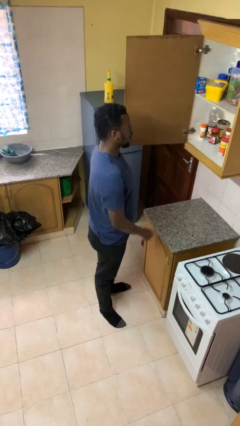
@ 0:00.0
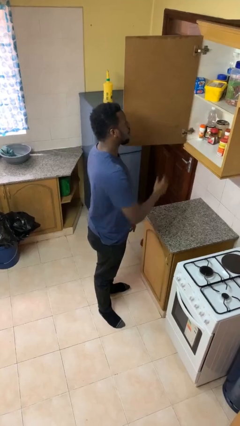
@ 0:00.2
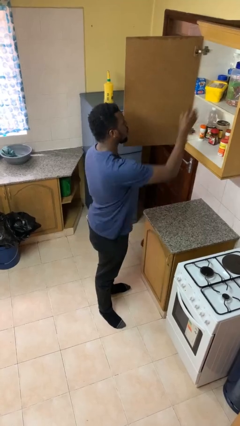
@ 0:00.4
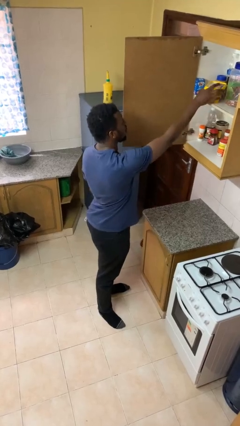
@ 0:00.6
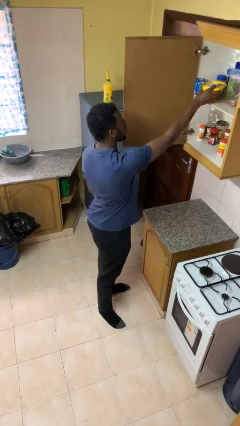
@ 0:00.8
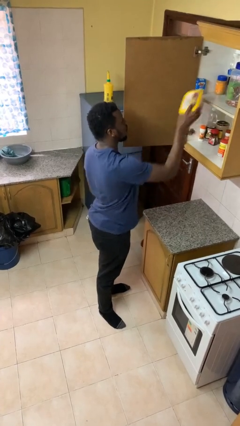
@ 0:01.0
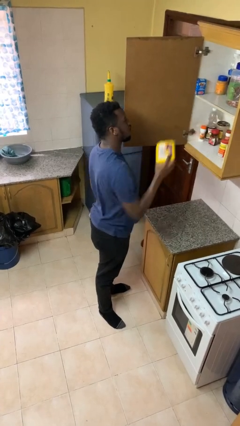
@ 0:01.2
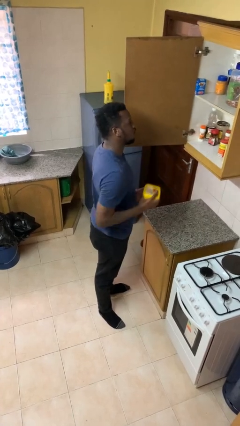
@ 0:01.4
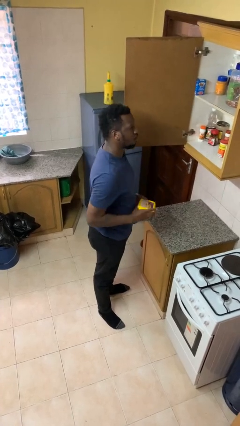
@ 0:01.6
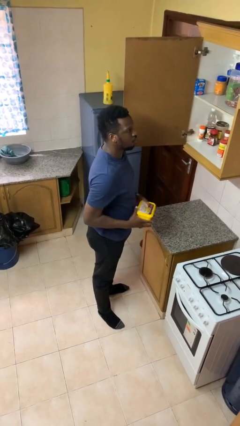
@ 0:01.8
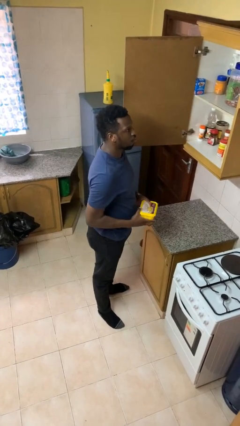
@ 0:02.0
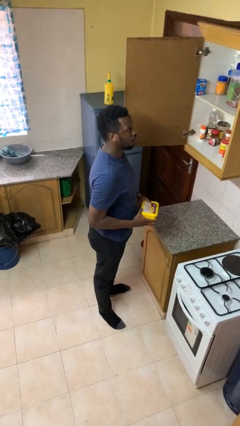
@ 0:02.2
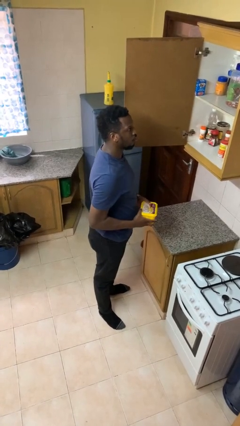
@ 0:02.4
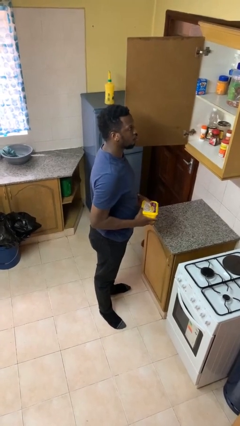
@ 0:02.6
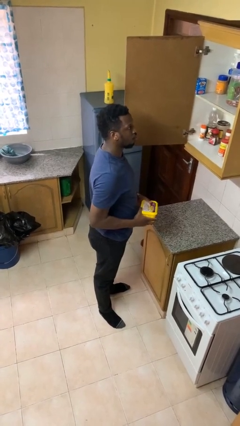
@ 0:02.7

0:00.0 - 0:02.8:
person picks up object from shelf

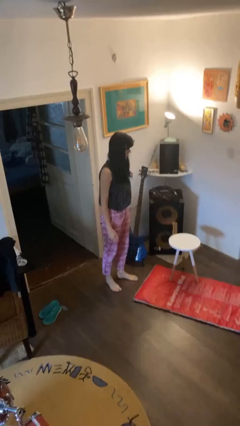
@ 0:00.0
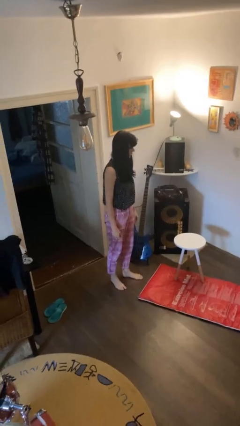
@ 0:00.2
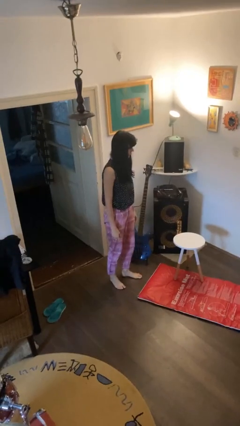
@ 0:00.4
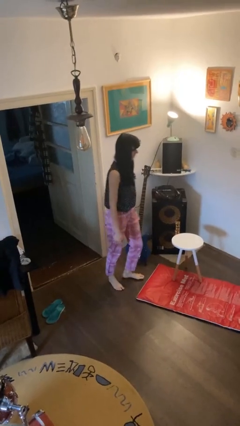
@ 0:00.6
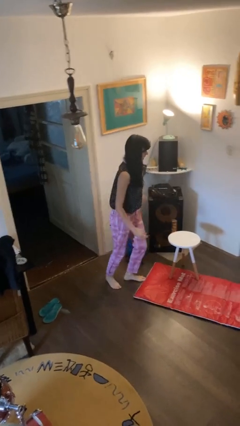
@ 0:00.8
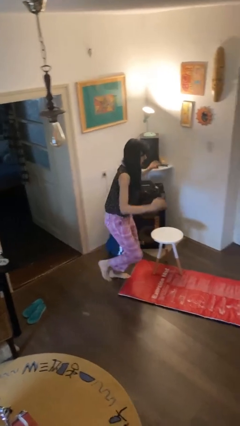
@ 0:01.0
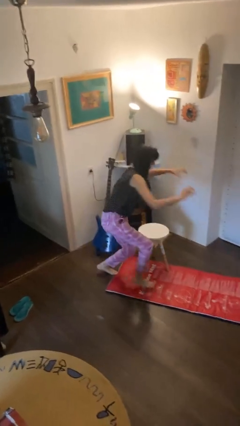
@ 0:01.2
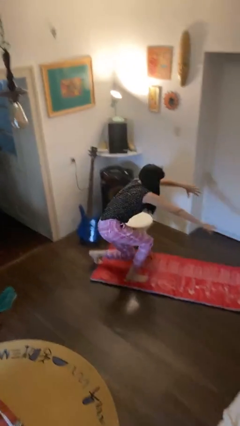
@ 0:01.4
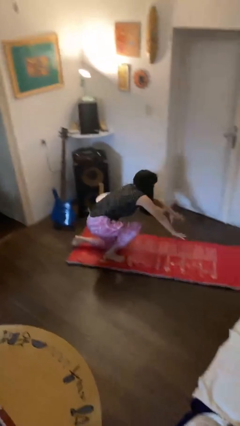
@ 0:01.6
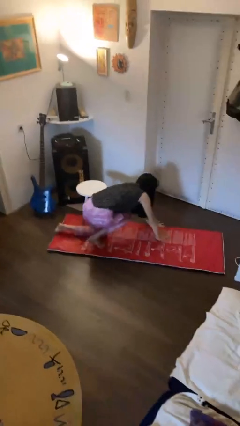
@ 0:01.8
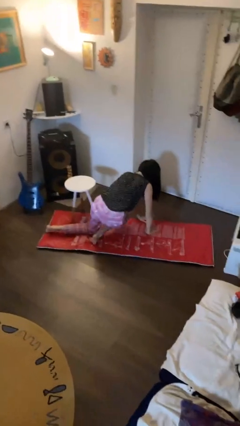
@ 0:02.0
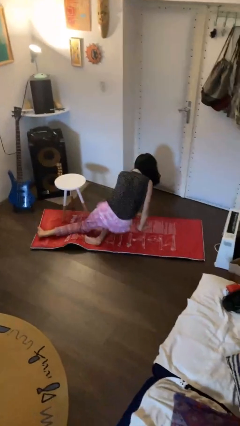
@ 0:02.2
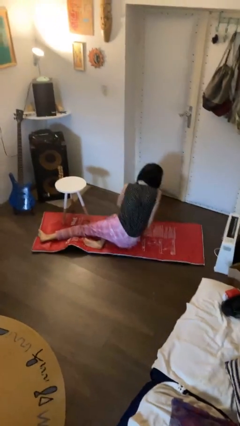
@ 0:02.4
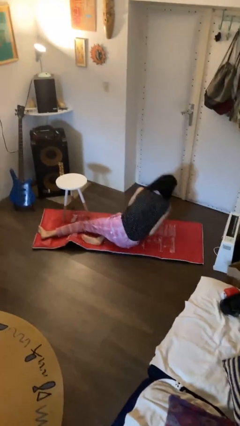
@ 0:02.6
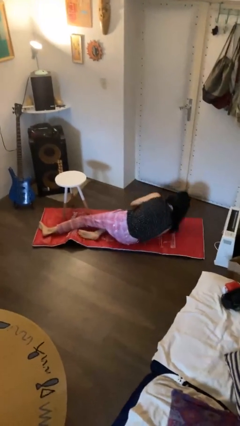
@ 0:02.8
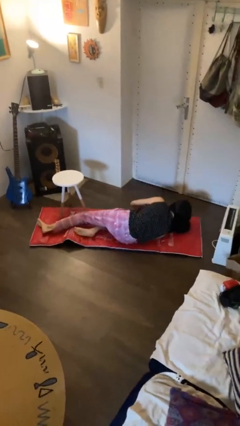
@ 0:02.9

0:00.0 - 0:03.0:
person trips on object on floor

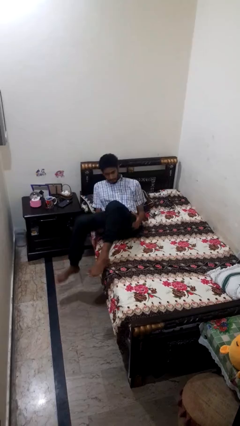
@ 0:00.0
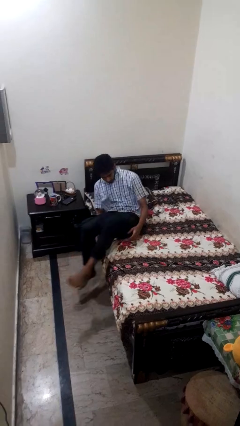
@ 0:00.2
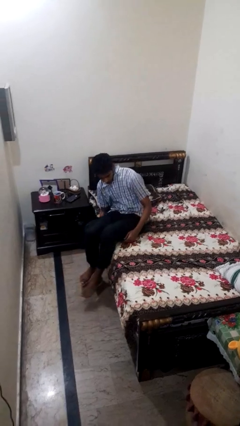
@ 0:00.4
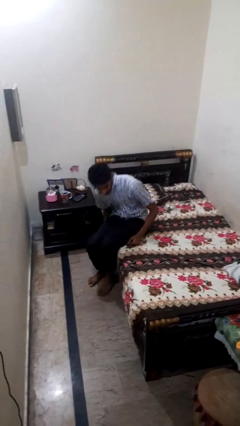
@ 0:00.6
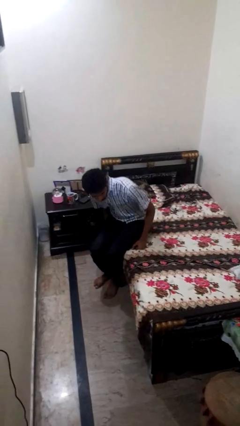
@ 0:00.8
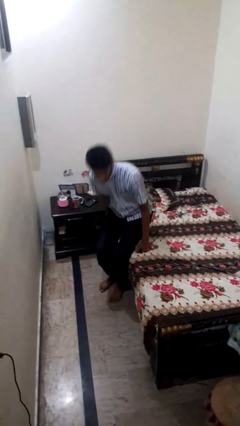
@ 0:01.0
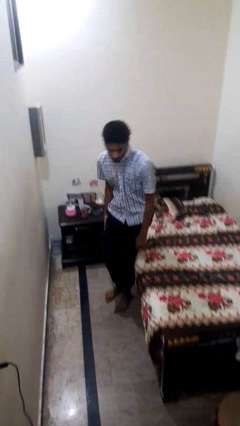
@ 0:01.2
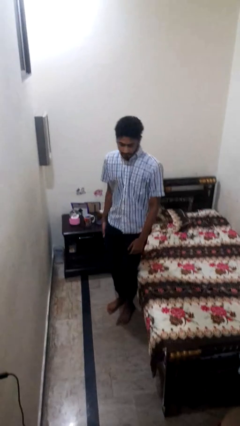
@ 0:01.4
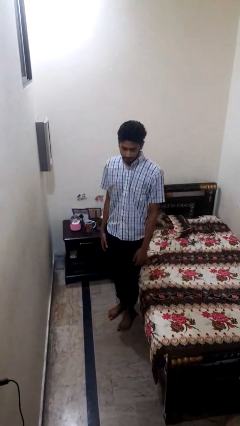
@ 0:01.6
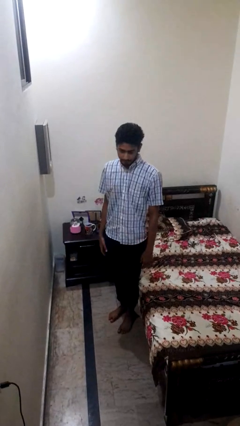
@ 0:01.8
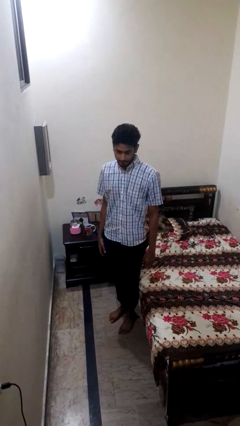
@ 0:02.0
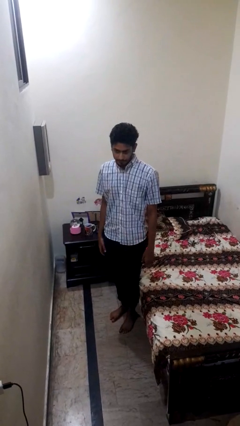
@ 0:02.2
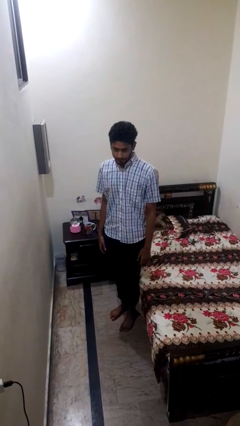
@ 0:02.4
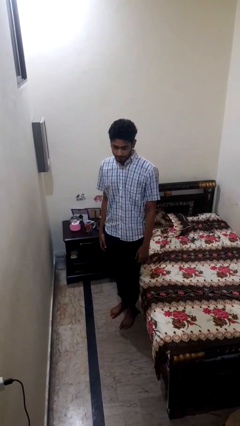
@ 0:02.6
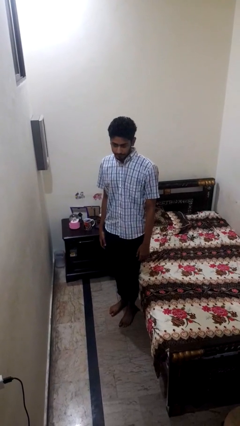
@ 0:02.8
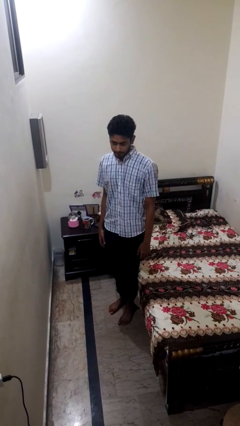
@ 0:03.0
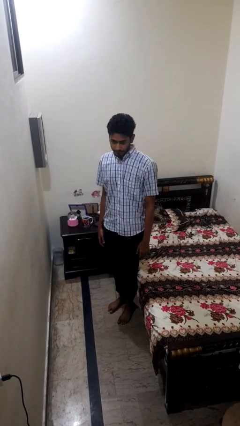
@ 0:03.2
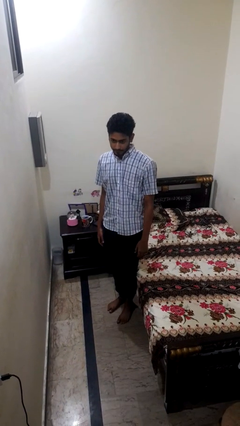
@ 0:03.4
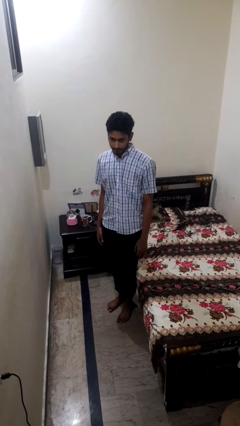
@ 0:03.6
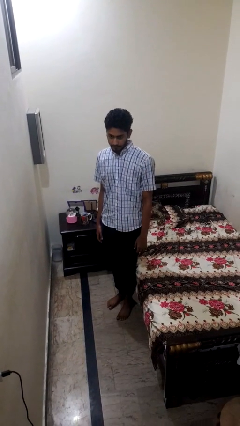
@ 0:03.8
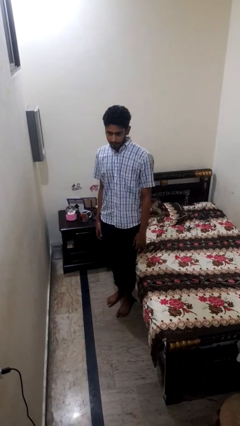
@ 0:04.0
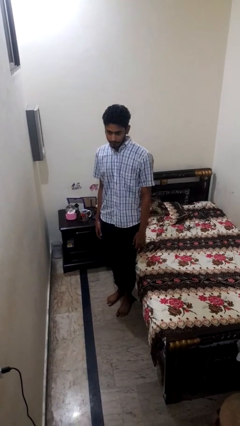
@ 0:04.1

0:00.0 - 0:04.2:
person stands up

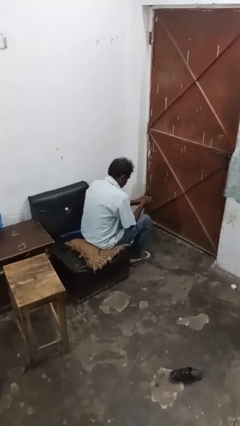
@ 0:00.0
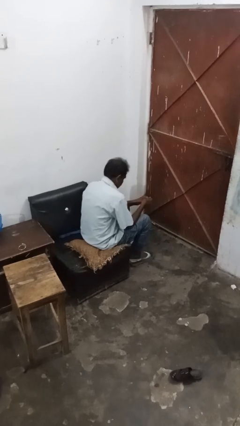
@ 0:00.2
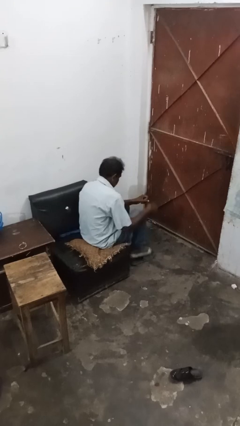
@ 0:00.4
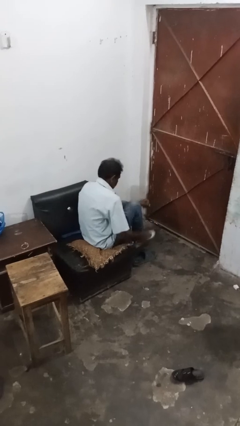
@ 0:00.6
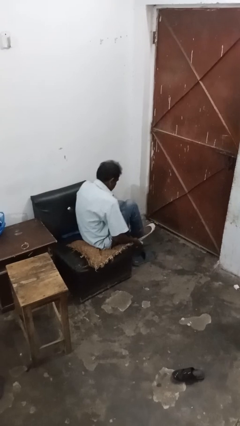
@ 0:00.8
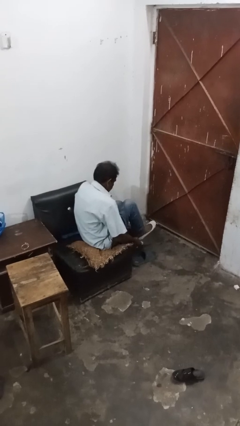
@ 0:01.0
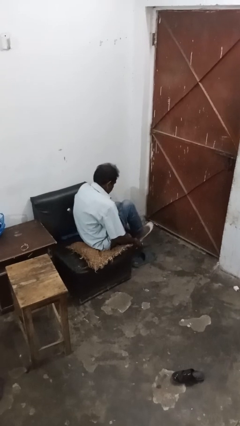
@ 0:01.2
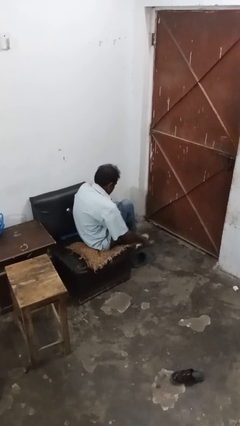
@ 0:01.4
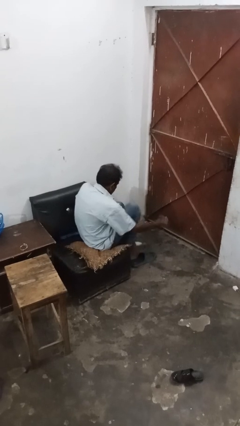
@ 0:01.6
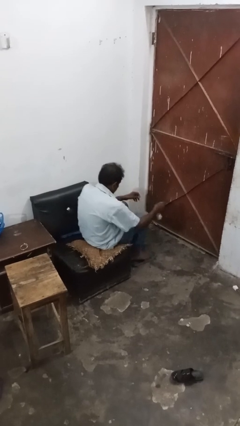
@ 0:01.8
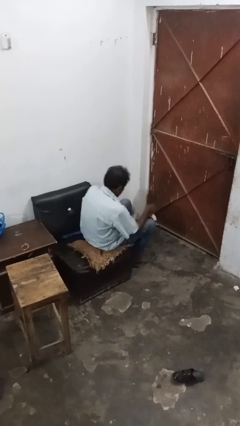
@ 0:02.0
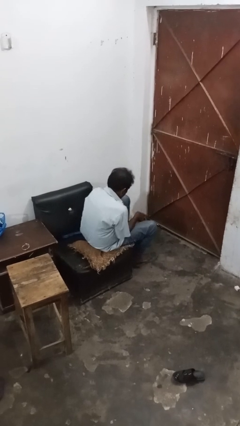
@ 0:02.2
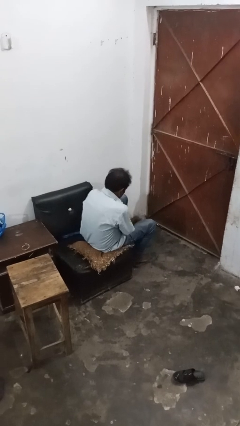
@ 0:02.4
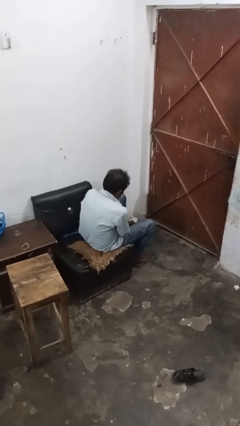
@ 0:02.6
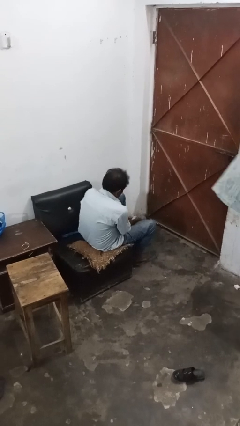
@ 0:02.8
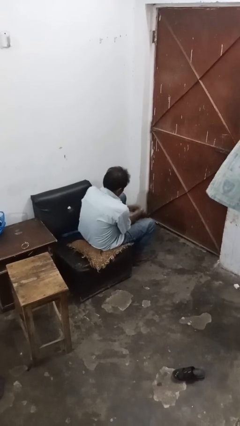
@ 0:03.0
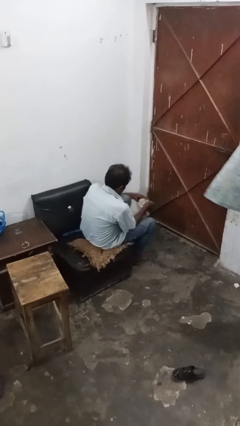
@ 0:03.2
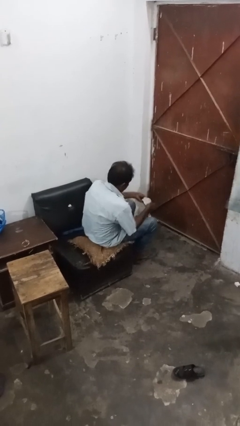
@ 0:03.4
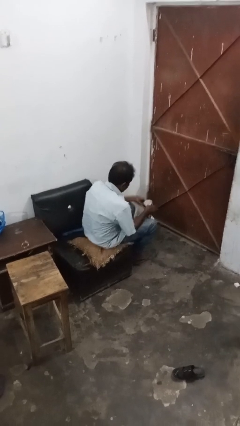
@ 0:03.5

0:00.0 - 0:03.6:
person takes off socks

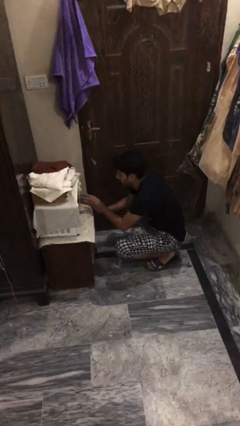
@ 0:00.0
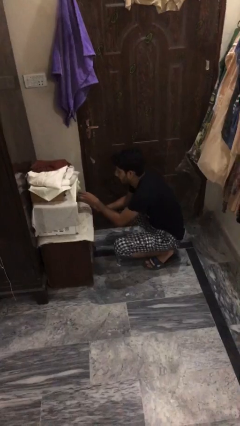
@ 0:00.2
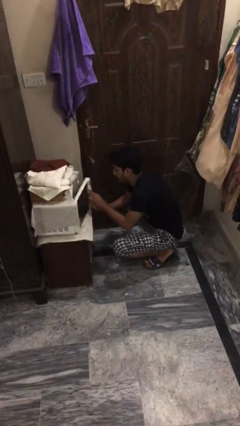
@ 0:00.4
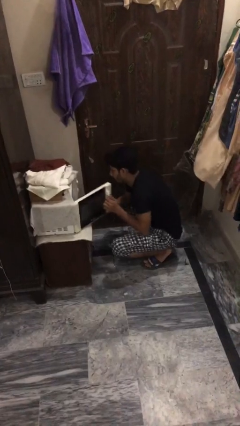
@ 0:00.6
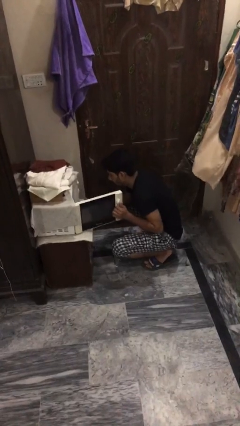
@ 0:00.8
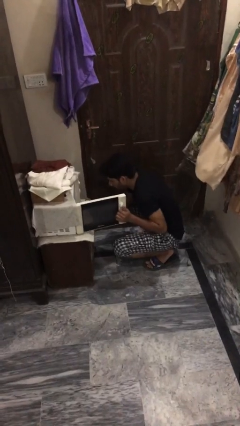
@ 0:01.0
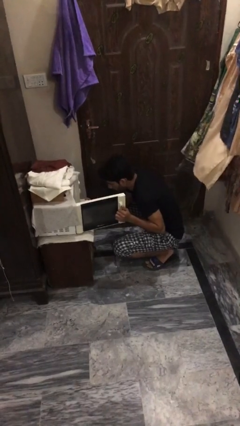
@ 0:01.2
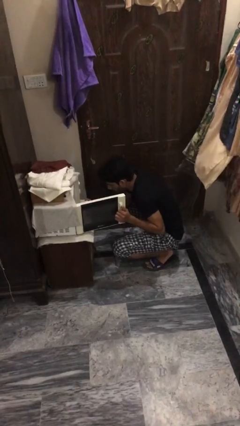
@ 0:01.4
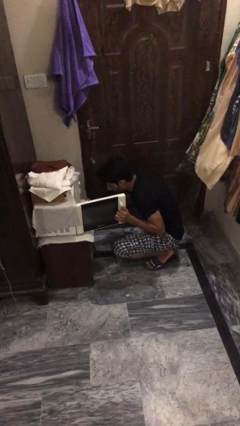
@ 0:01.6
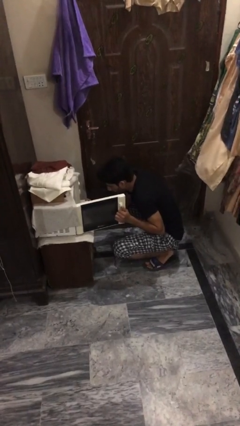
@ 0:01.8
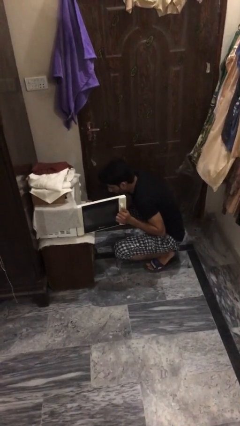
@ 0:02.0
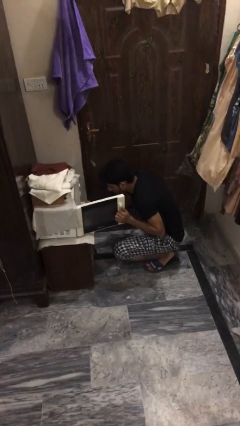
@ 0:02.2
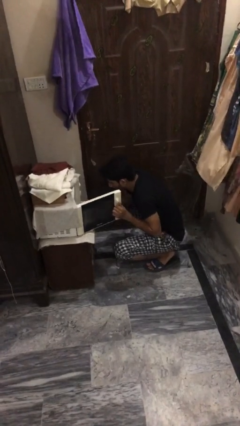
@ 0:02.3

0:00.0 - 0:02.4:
person opens oven door

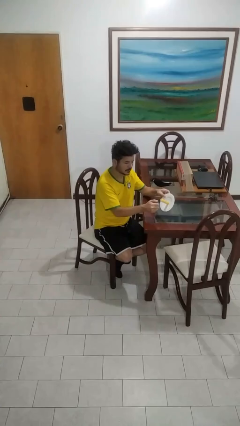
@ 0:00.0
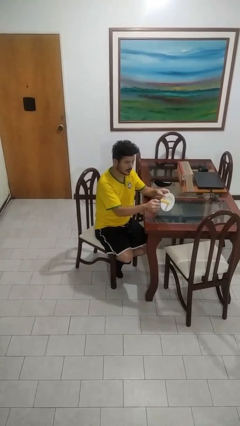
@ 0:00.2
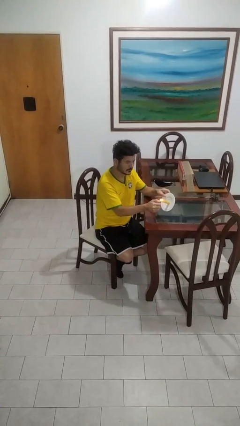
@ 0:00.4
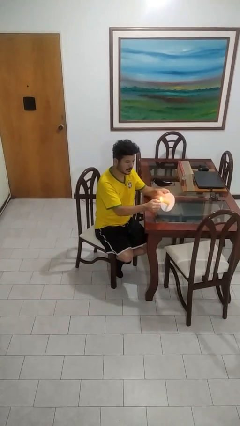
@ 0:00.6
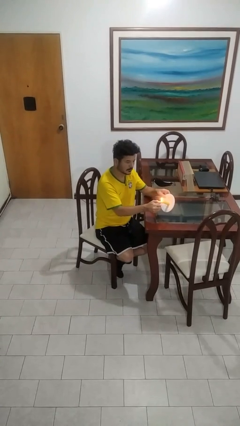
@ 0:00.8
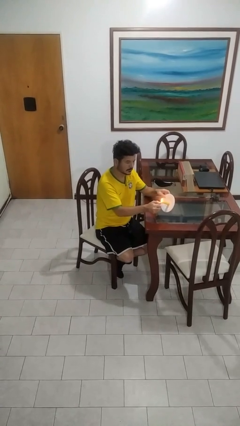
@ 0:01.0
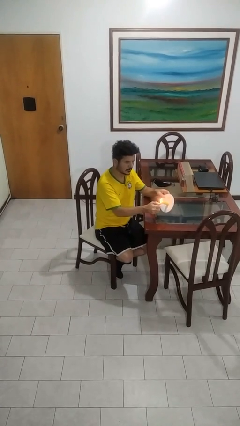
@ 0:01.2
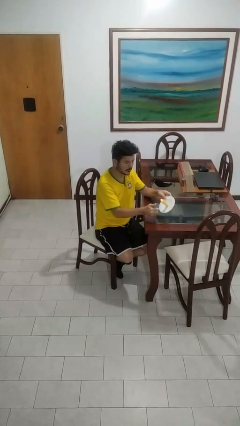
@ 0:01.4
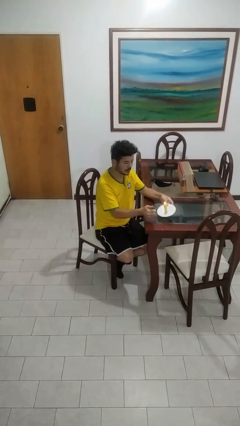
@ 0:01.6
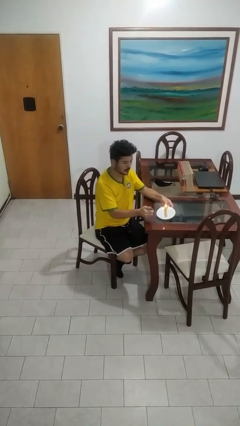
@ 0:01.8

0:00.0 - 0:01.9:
person lights candle
